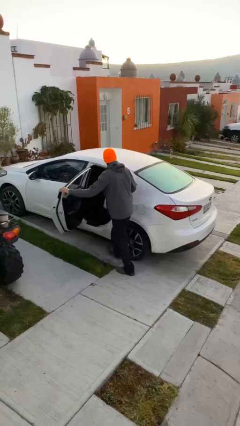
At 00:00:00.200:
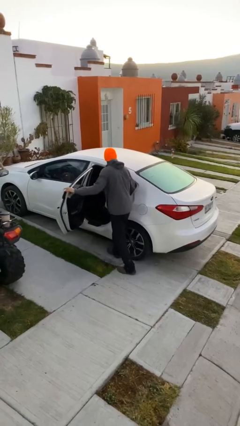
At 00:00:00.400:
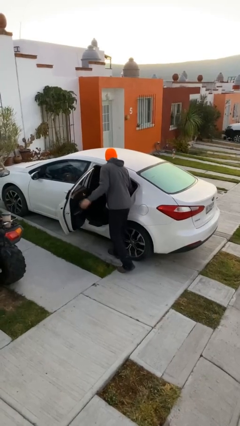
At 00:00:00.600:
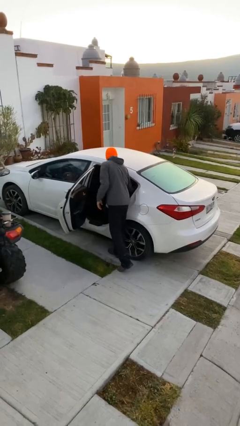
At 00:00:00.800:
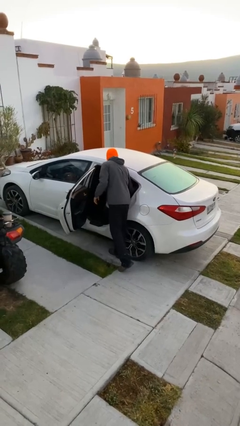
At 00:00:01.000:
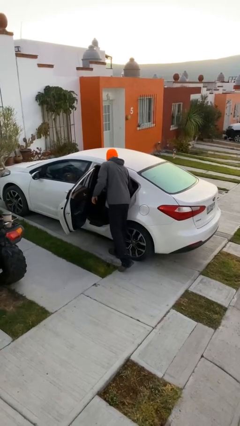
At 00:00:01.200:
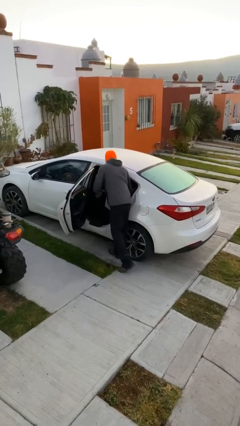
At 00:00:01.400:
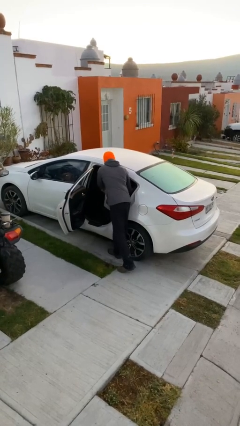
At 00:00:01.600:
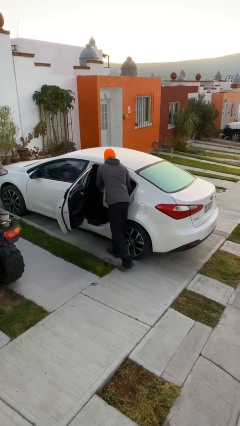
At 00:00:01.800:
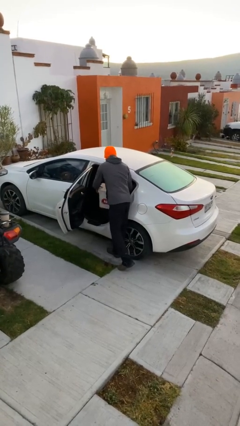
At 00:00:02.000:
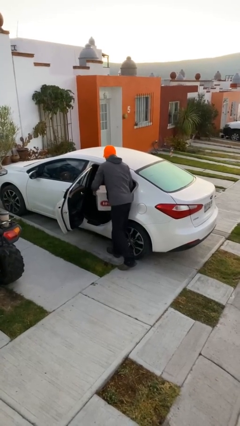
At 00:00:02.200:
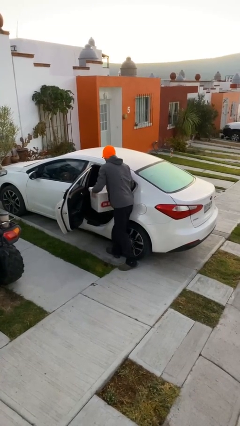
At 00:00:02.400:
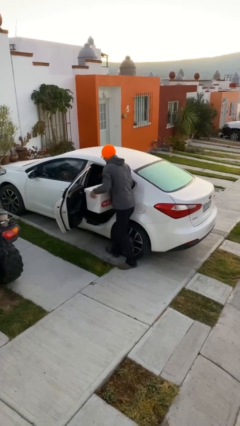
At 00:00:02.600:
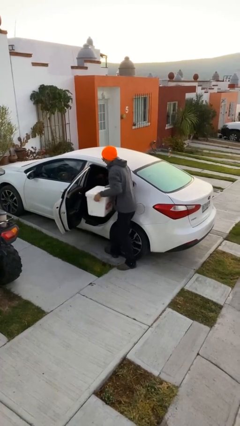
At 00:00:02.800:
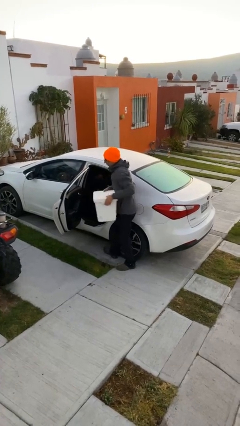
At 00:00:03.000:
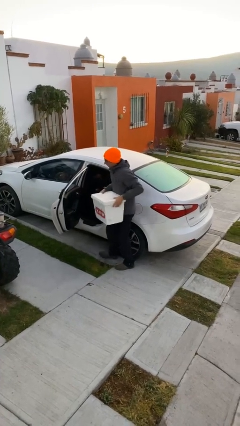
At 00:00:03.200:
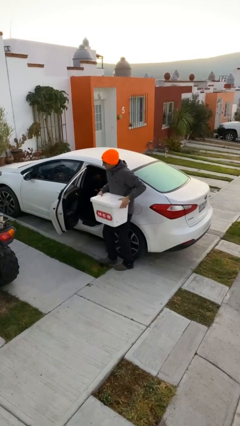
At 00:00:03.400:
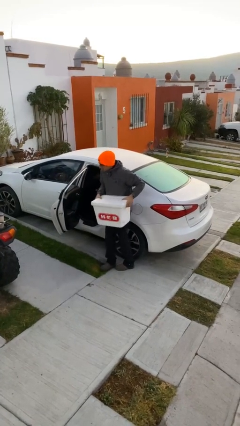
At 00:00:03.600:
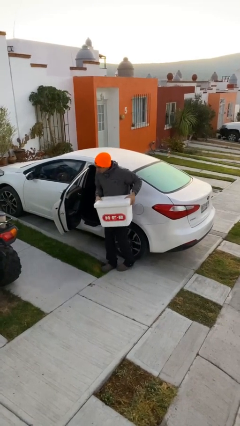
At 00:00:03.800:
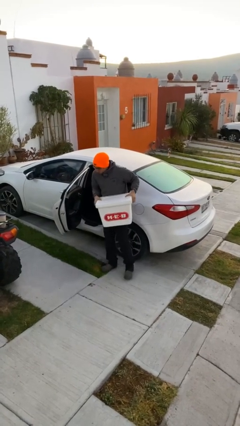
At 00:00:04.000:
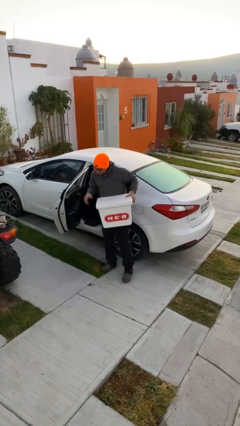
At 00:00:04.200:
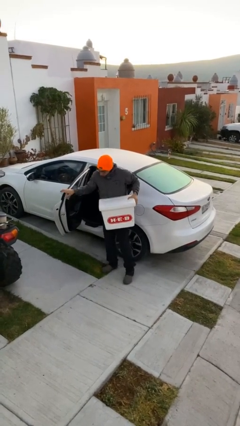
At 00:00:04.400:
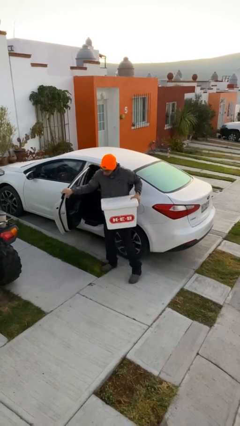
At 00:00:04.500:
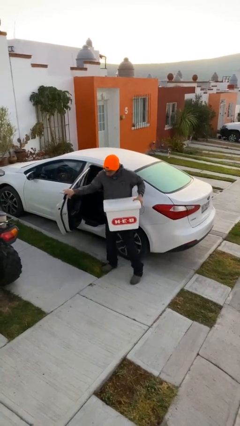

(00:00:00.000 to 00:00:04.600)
person unloads car

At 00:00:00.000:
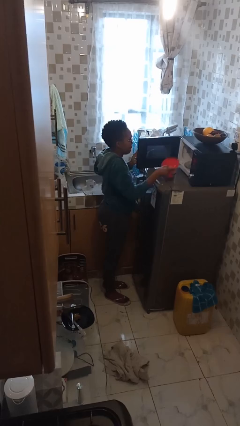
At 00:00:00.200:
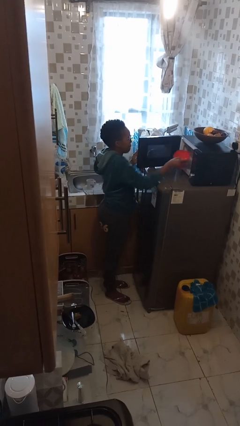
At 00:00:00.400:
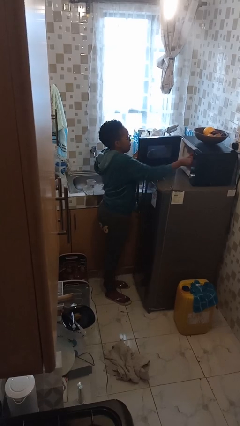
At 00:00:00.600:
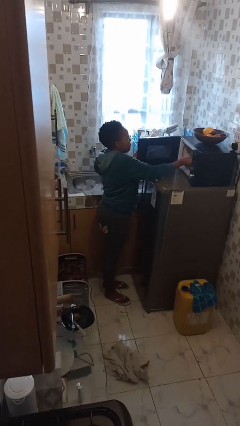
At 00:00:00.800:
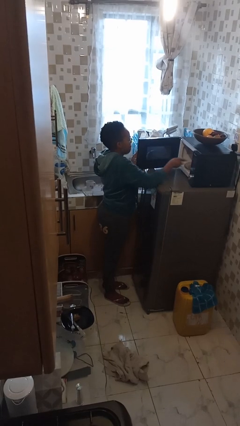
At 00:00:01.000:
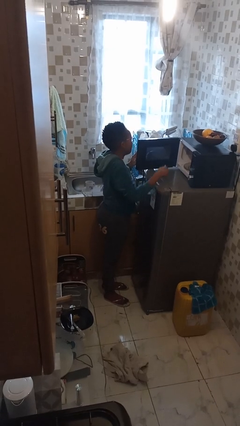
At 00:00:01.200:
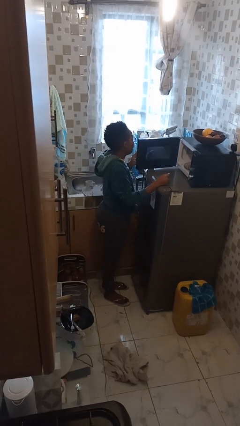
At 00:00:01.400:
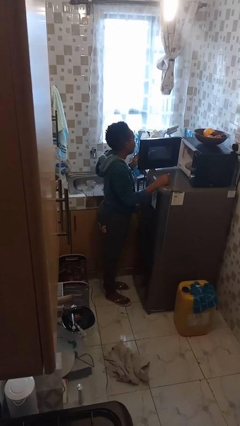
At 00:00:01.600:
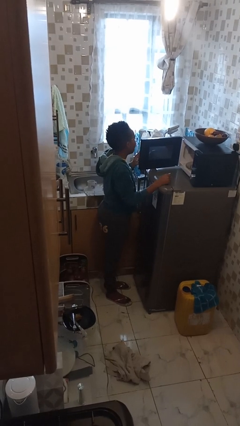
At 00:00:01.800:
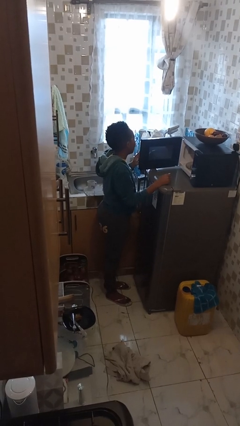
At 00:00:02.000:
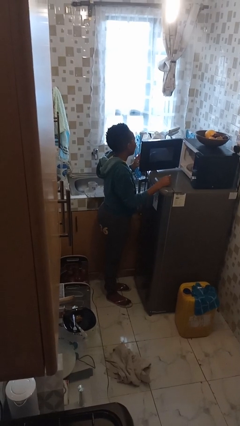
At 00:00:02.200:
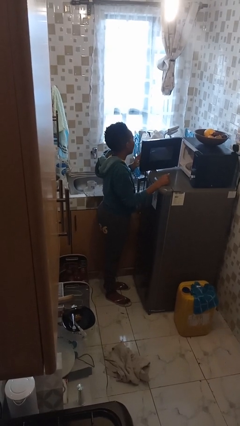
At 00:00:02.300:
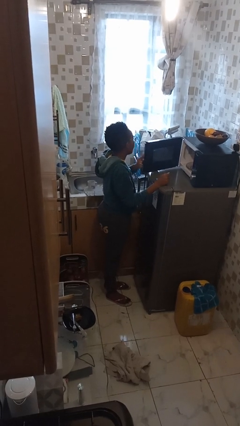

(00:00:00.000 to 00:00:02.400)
person puts object into microwave

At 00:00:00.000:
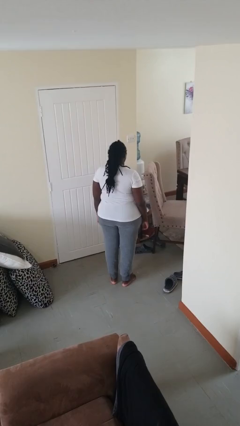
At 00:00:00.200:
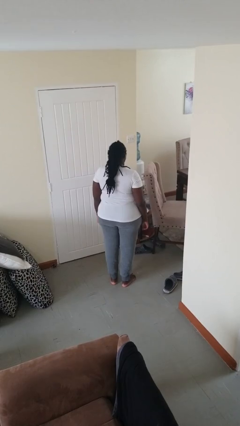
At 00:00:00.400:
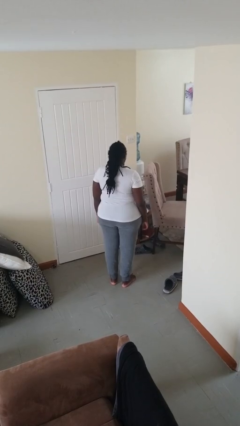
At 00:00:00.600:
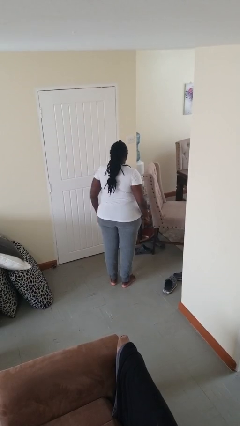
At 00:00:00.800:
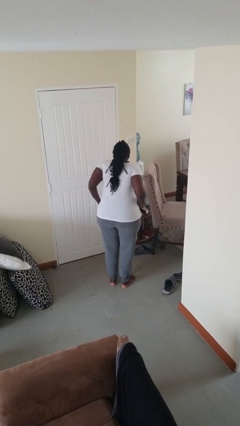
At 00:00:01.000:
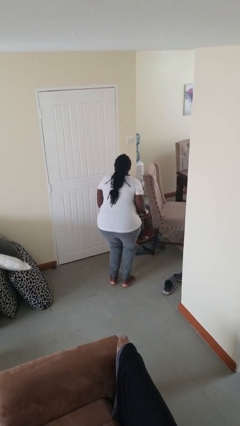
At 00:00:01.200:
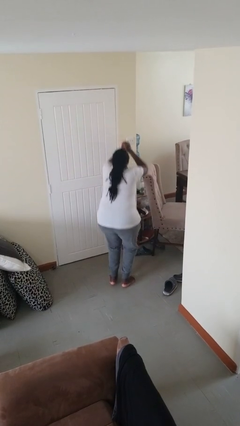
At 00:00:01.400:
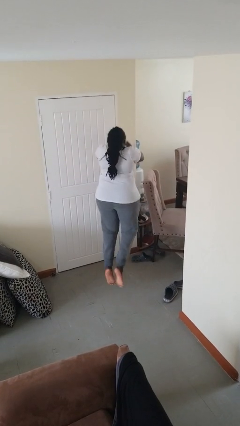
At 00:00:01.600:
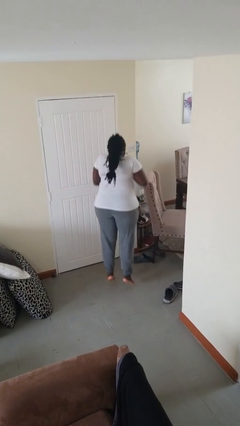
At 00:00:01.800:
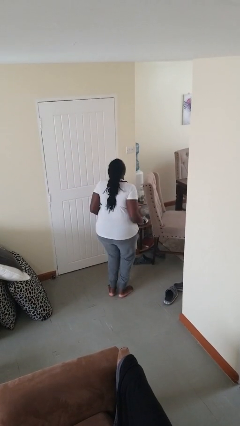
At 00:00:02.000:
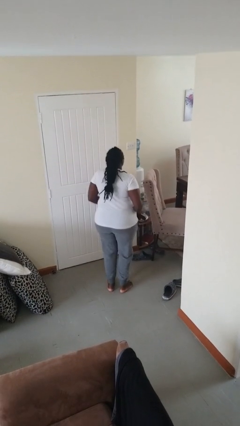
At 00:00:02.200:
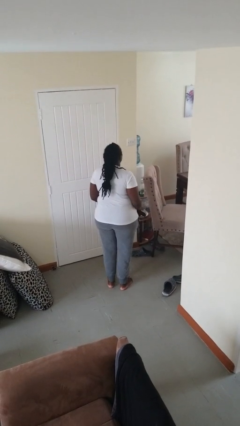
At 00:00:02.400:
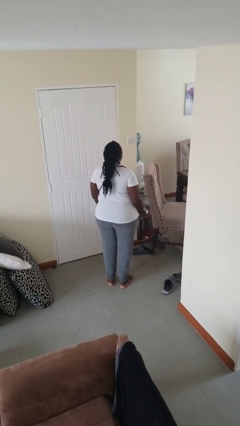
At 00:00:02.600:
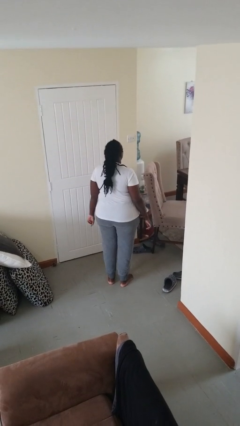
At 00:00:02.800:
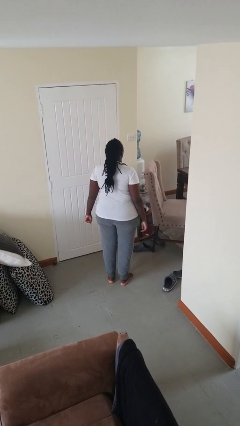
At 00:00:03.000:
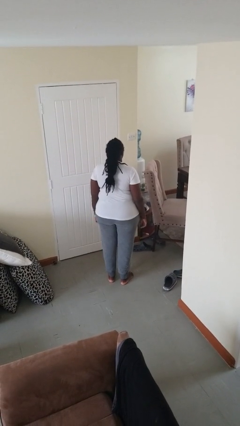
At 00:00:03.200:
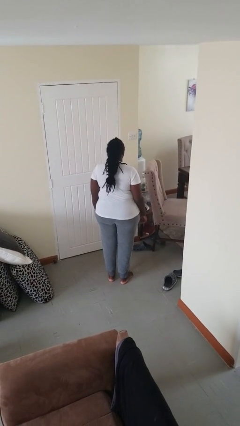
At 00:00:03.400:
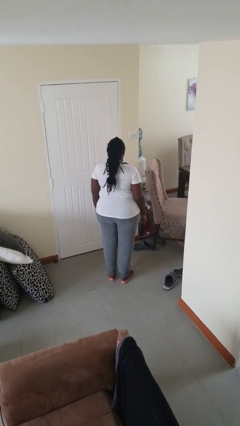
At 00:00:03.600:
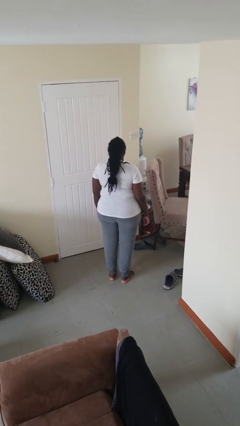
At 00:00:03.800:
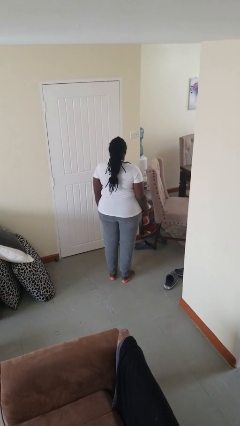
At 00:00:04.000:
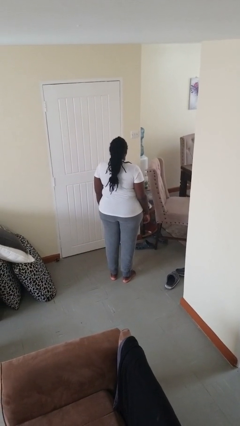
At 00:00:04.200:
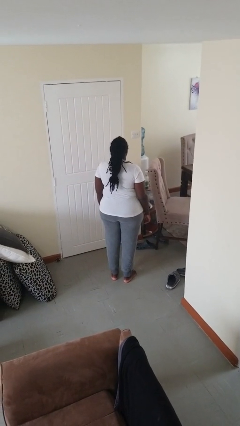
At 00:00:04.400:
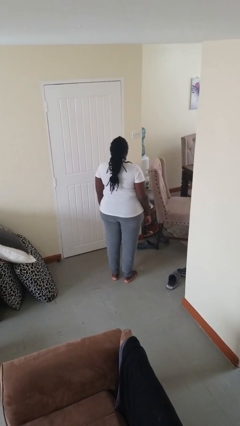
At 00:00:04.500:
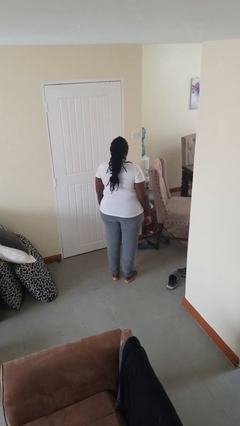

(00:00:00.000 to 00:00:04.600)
person jumps

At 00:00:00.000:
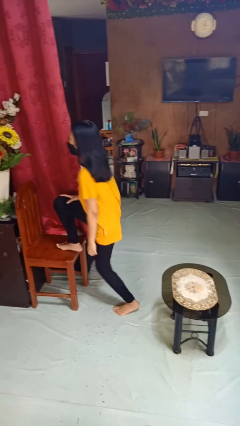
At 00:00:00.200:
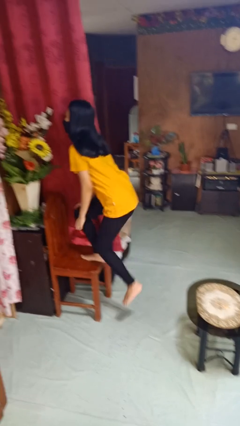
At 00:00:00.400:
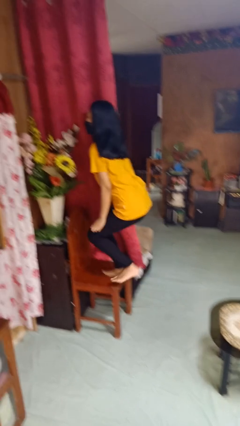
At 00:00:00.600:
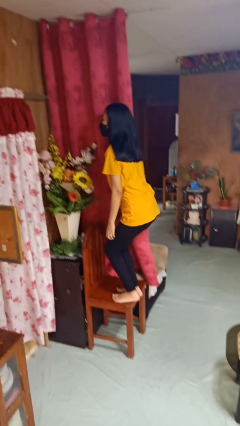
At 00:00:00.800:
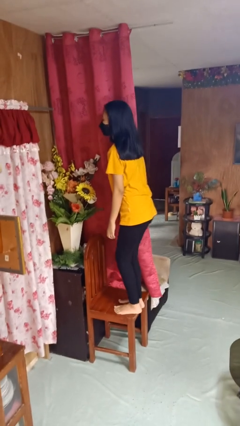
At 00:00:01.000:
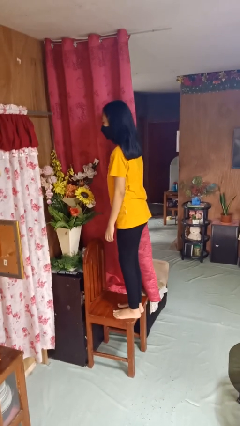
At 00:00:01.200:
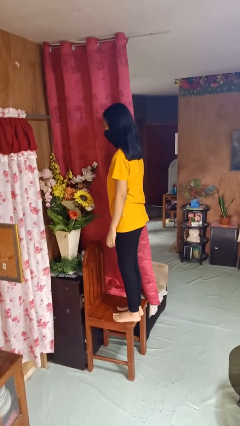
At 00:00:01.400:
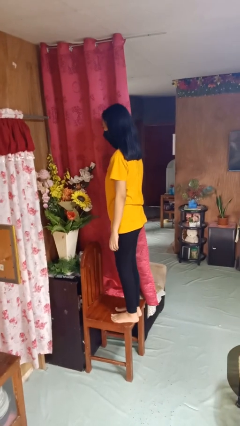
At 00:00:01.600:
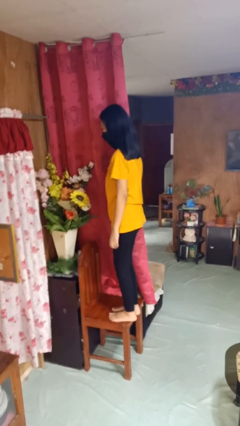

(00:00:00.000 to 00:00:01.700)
person climbs on chair

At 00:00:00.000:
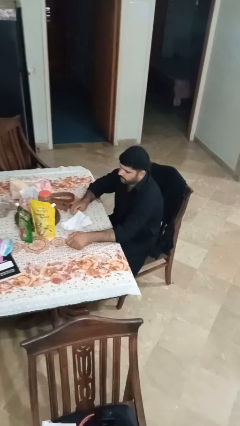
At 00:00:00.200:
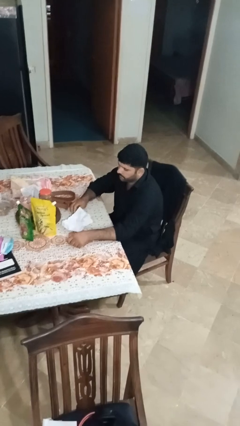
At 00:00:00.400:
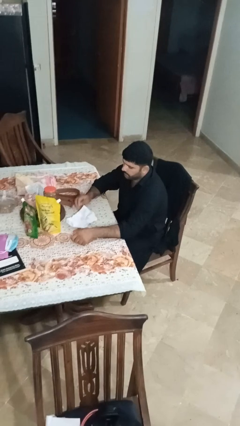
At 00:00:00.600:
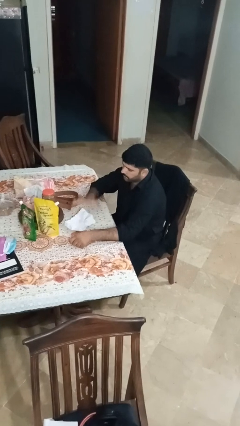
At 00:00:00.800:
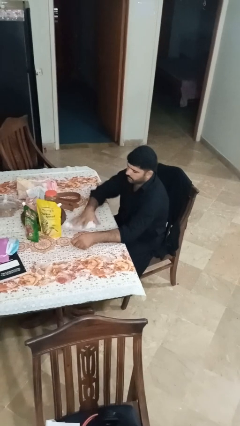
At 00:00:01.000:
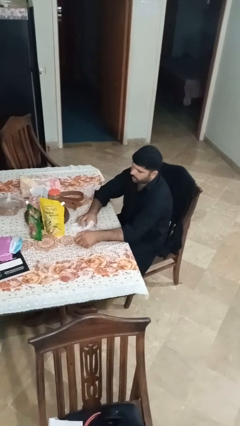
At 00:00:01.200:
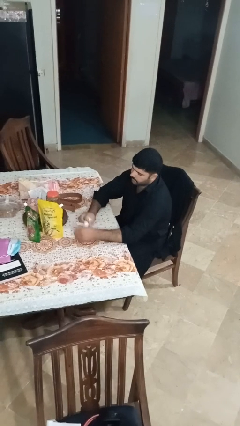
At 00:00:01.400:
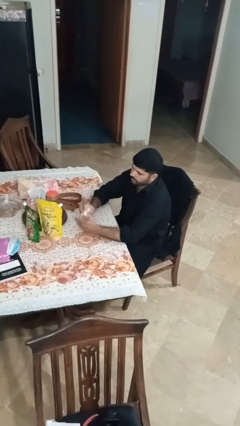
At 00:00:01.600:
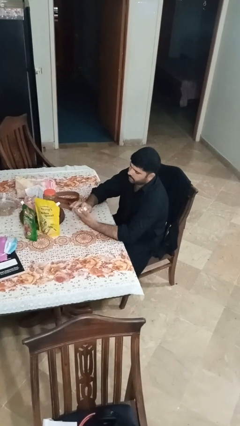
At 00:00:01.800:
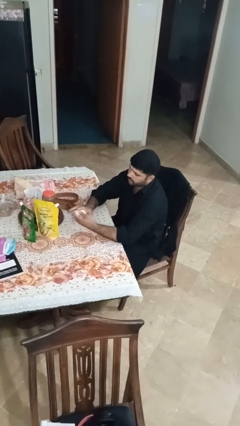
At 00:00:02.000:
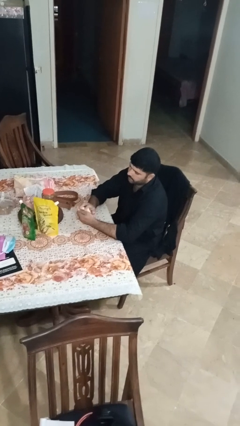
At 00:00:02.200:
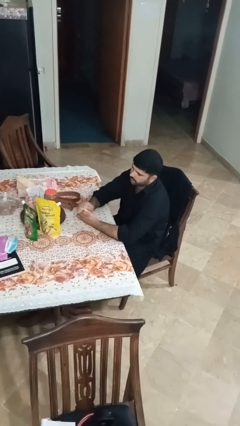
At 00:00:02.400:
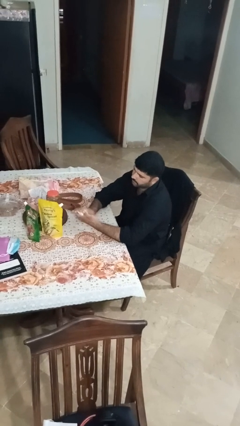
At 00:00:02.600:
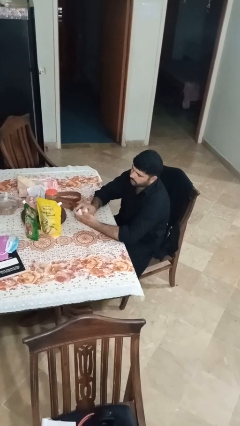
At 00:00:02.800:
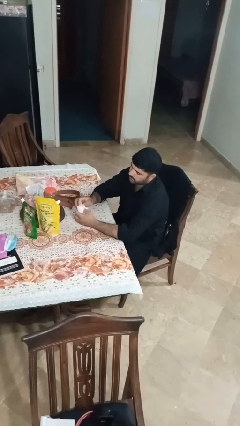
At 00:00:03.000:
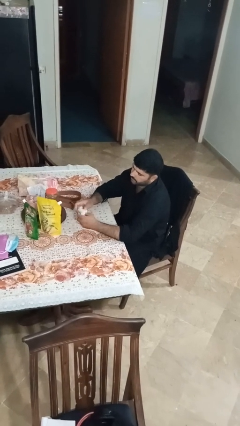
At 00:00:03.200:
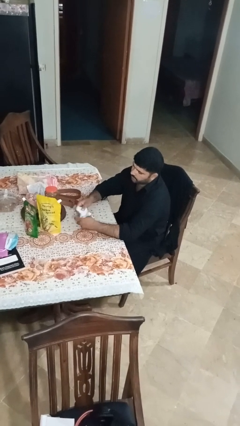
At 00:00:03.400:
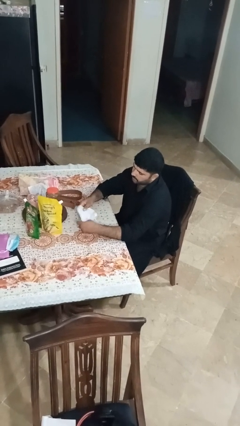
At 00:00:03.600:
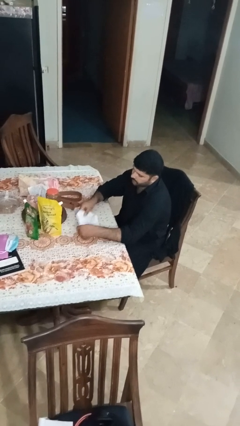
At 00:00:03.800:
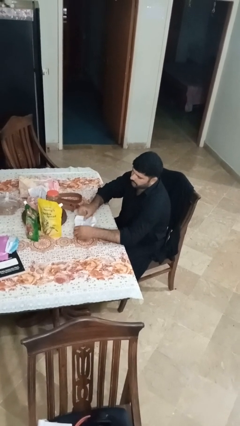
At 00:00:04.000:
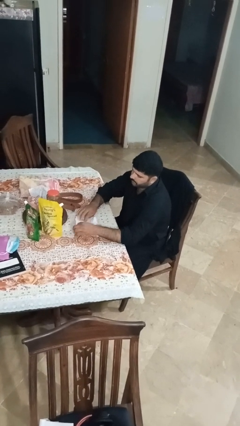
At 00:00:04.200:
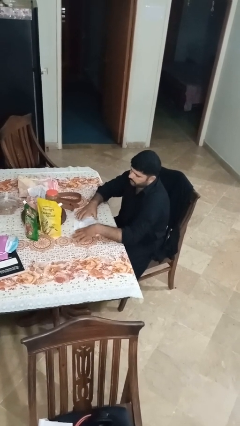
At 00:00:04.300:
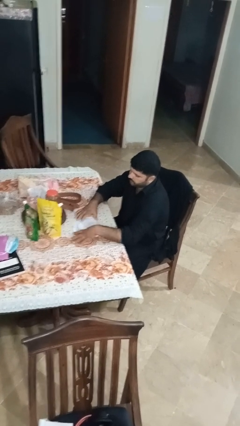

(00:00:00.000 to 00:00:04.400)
person crumples paper
